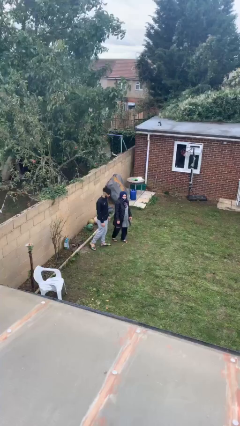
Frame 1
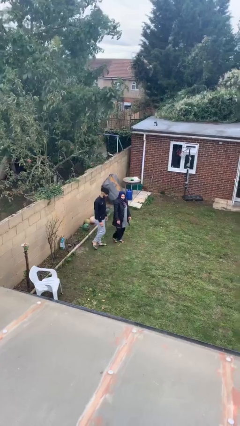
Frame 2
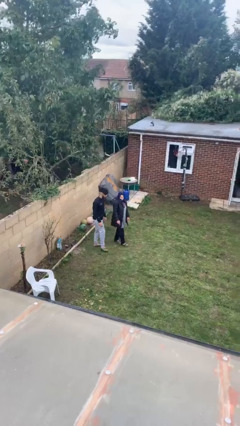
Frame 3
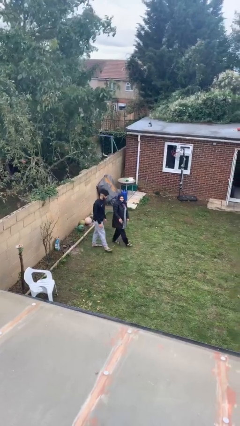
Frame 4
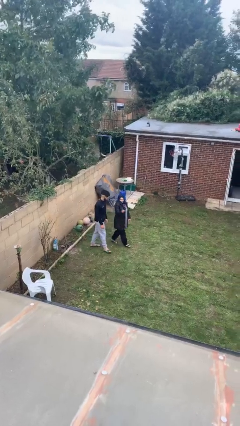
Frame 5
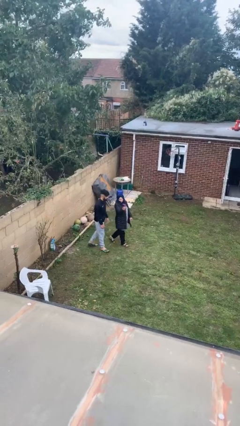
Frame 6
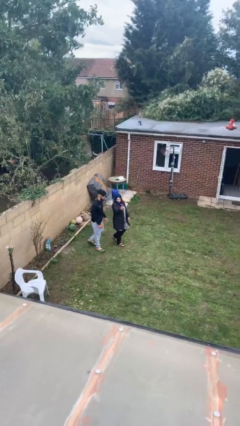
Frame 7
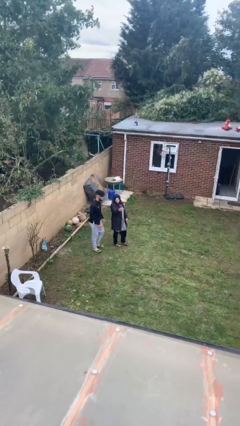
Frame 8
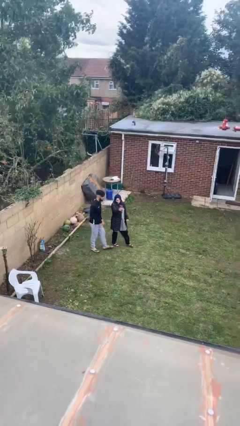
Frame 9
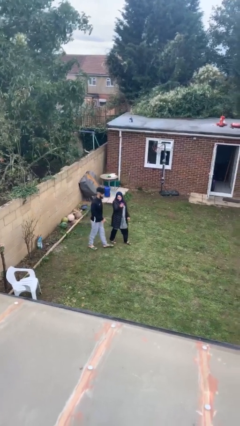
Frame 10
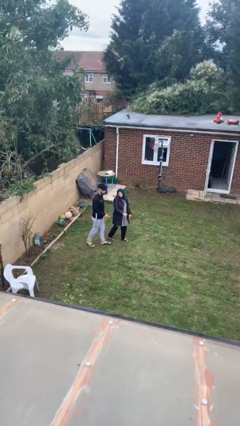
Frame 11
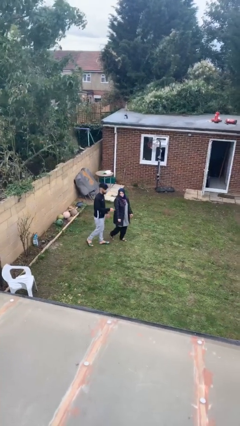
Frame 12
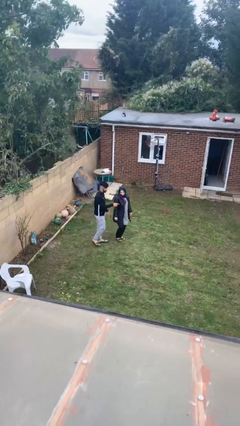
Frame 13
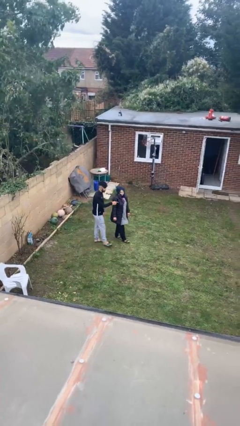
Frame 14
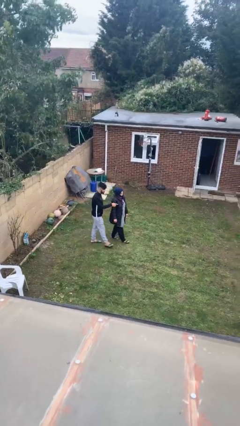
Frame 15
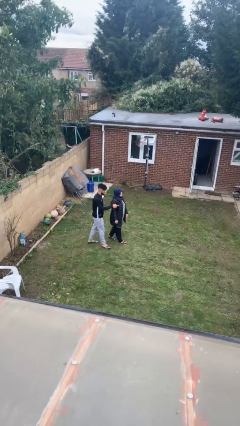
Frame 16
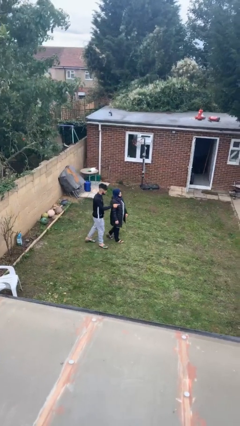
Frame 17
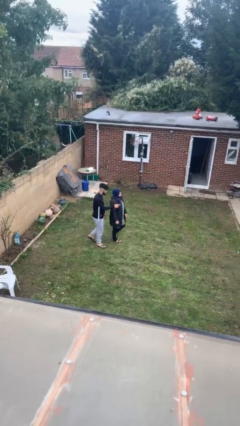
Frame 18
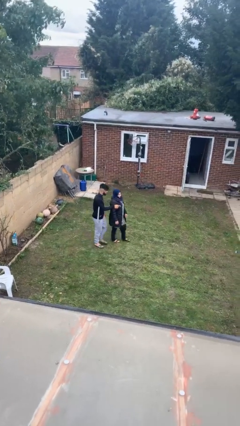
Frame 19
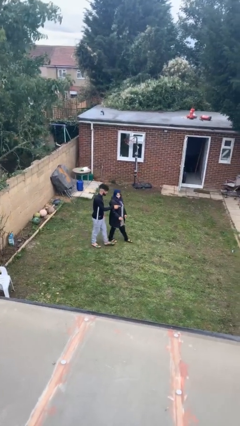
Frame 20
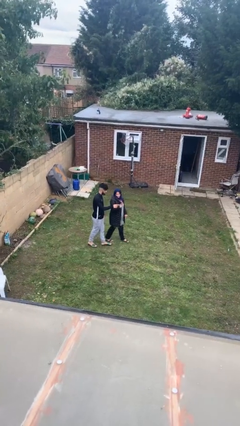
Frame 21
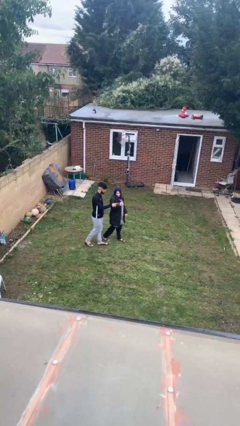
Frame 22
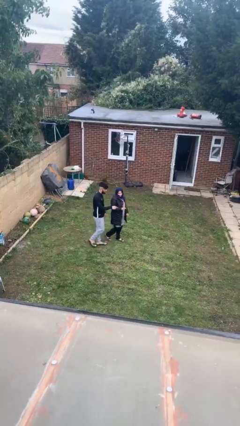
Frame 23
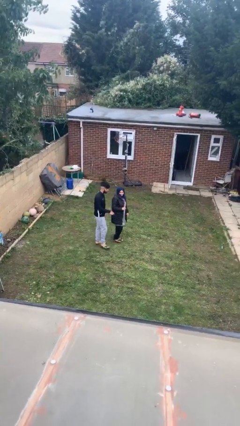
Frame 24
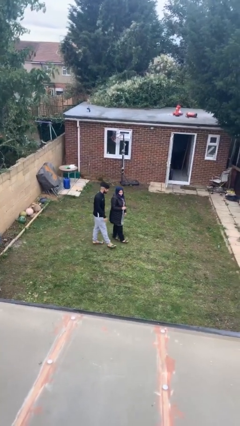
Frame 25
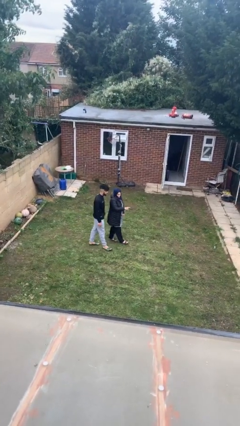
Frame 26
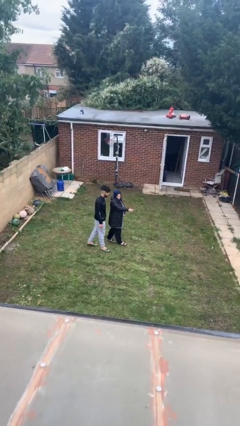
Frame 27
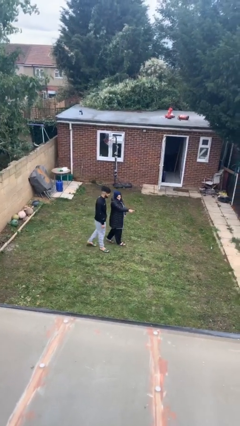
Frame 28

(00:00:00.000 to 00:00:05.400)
person talks to person

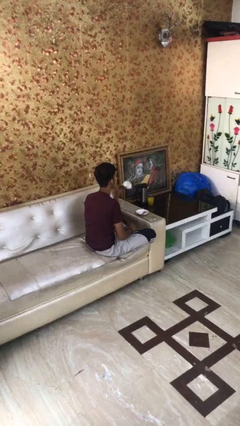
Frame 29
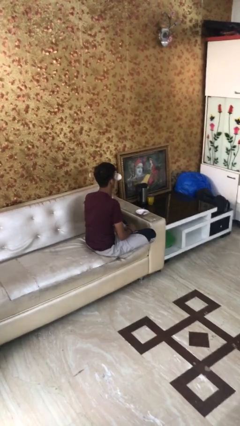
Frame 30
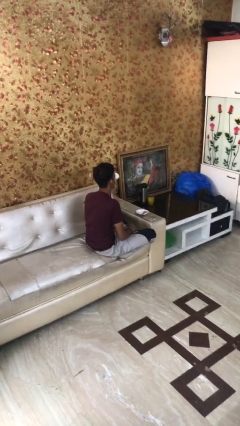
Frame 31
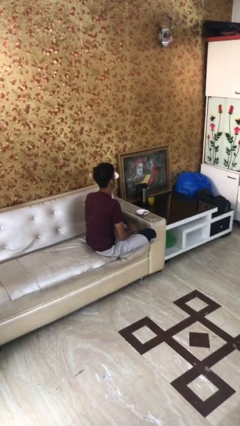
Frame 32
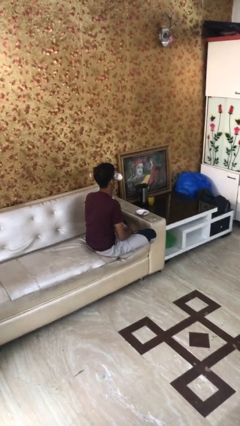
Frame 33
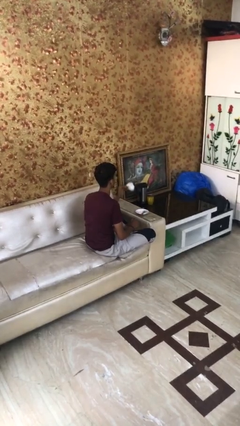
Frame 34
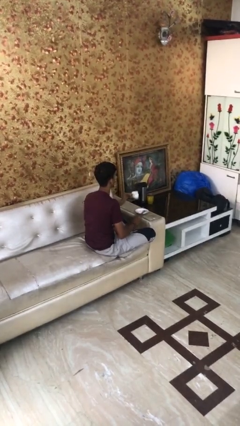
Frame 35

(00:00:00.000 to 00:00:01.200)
person drinks from mug

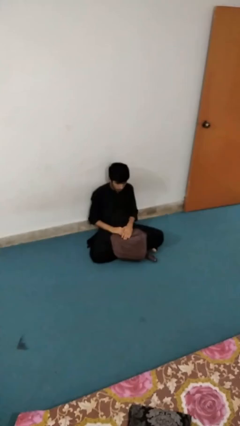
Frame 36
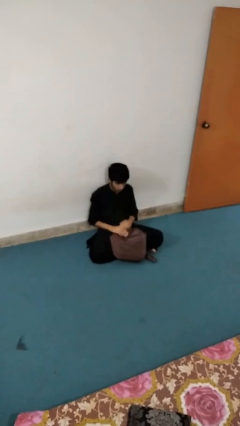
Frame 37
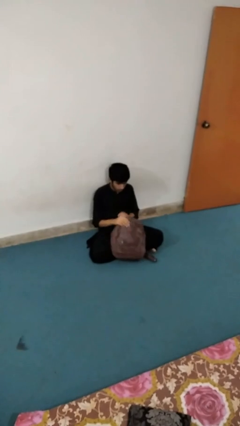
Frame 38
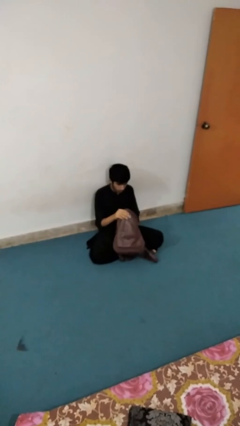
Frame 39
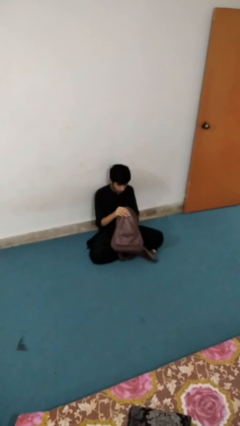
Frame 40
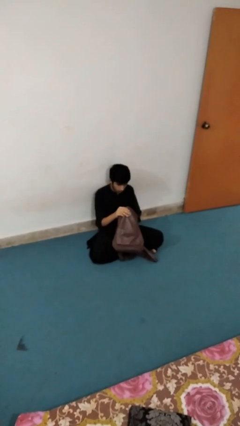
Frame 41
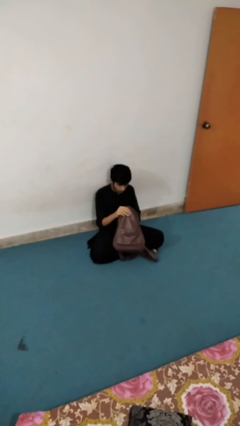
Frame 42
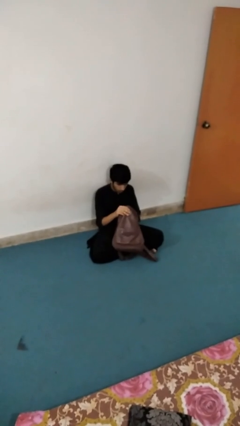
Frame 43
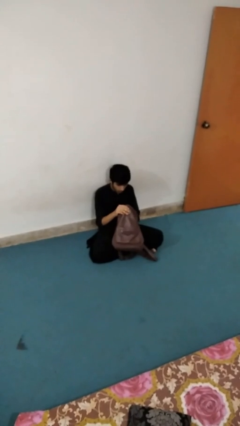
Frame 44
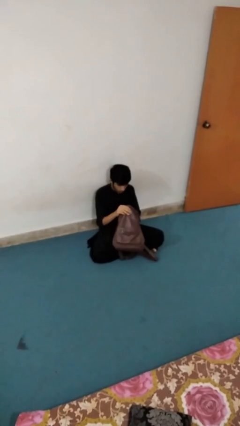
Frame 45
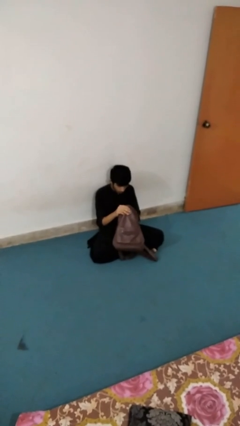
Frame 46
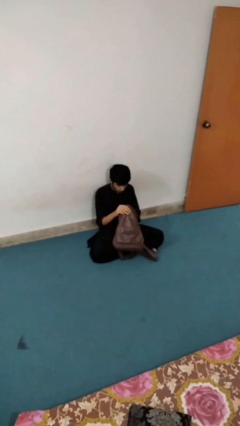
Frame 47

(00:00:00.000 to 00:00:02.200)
person searches in bag

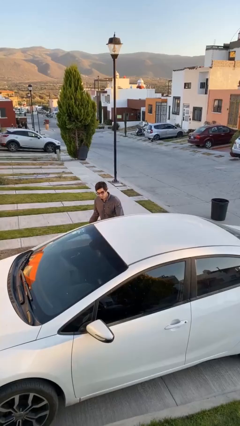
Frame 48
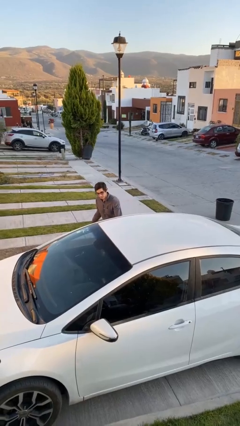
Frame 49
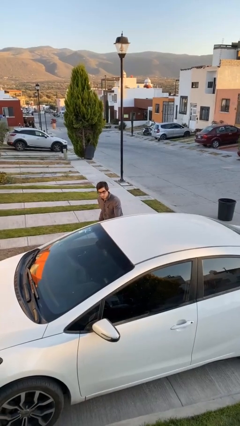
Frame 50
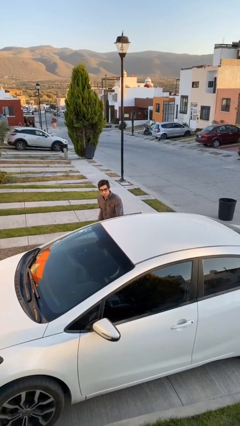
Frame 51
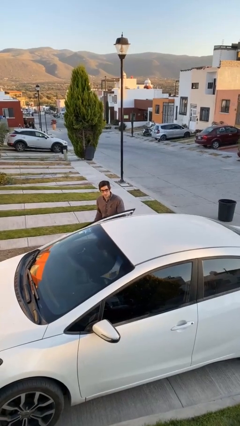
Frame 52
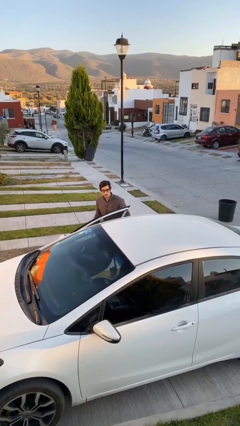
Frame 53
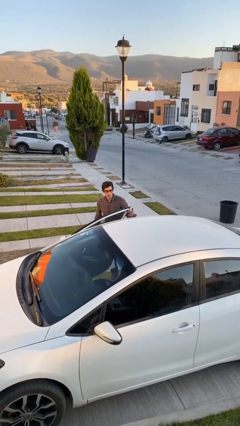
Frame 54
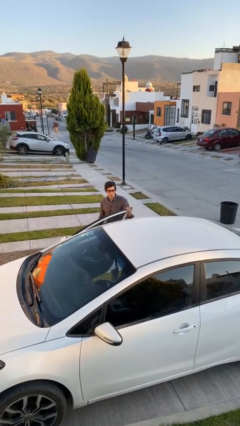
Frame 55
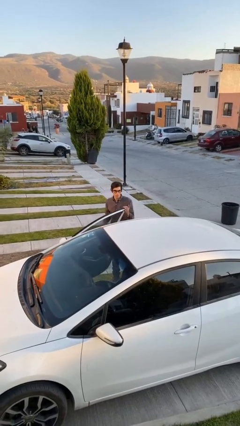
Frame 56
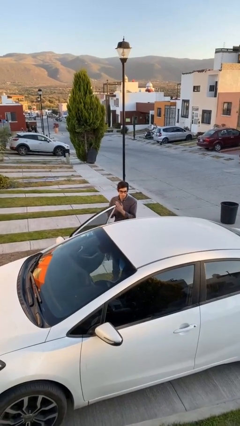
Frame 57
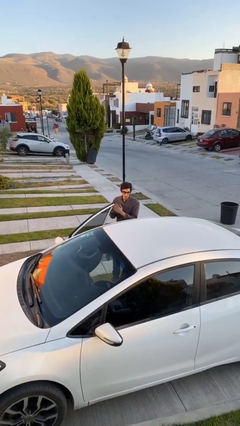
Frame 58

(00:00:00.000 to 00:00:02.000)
person opens car door

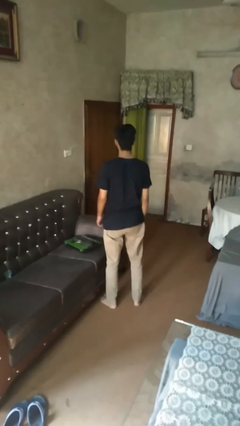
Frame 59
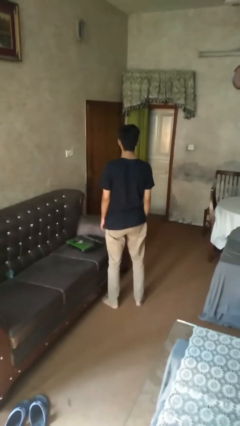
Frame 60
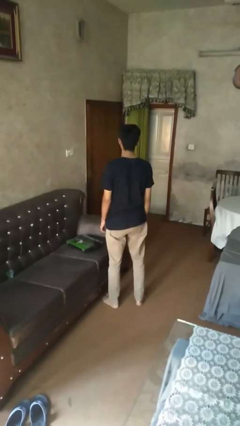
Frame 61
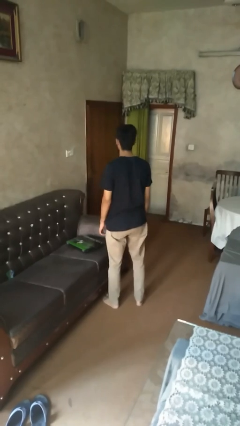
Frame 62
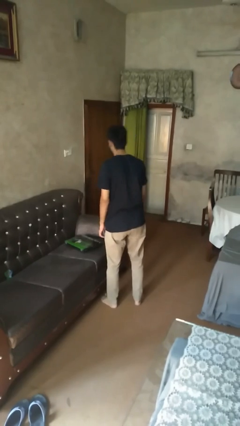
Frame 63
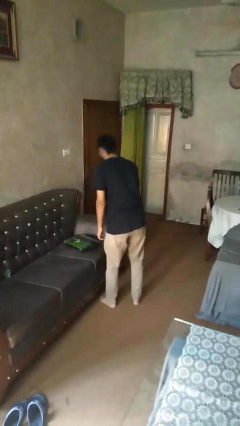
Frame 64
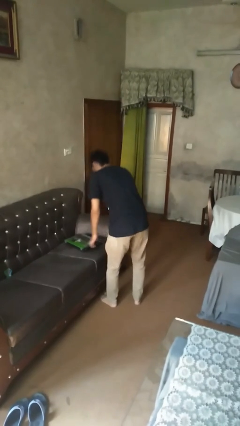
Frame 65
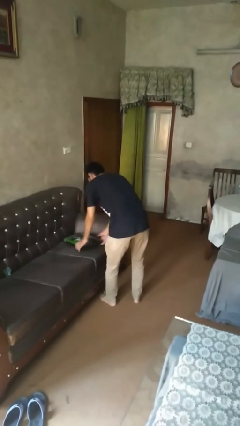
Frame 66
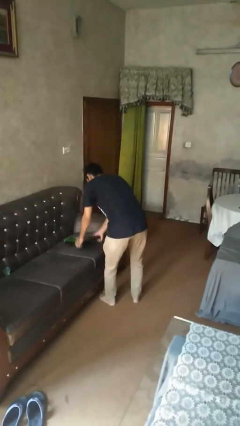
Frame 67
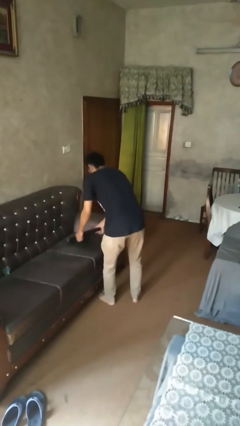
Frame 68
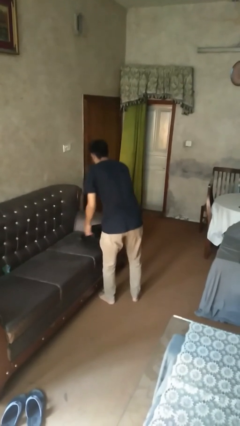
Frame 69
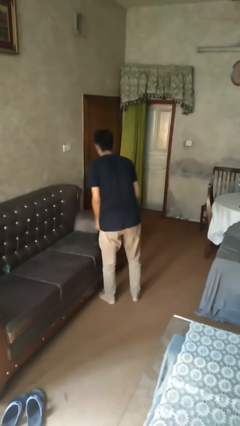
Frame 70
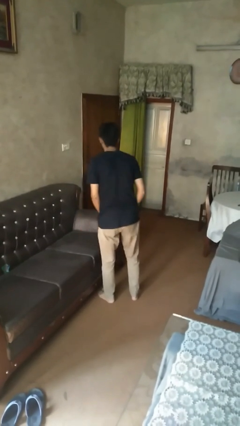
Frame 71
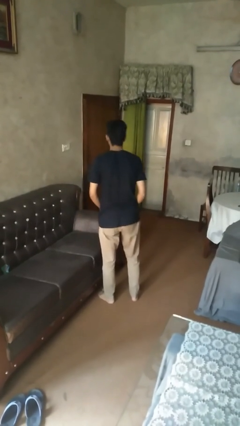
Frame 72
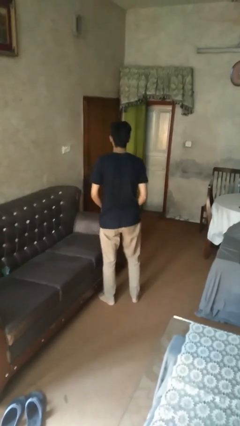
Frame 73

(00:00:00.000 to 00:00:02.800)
person picks up object from couch

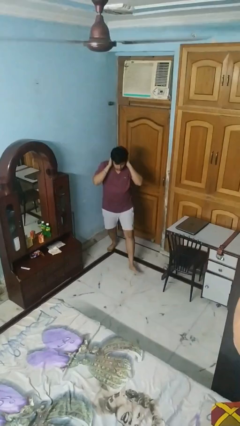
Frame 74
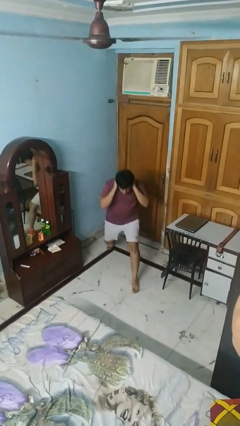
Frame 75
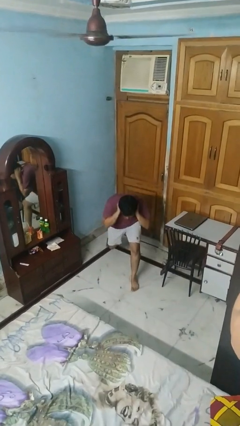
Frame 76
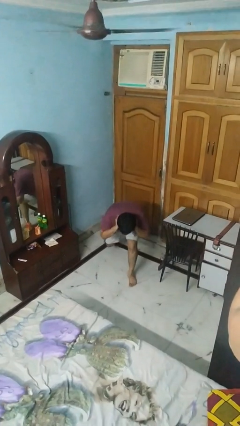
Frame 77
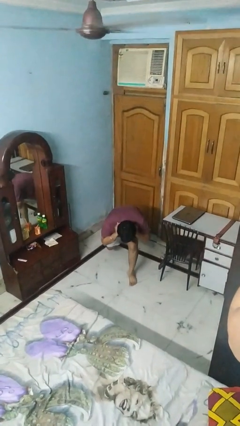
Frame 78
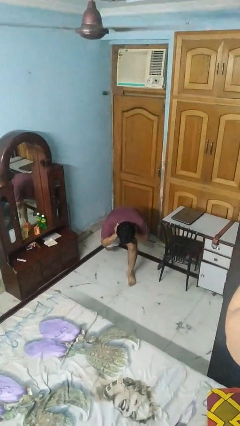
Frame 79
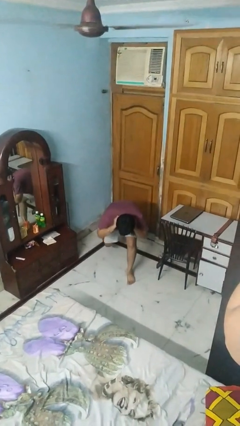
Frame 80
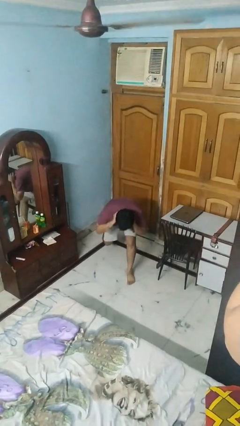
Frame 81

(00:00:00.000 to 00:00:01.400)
person exercises with lunges

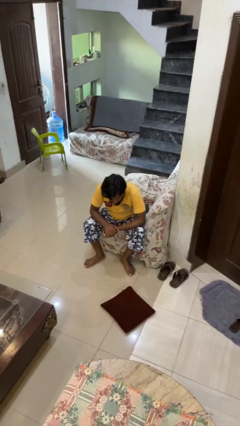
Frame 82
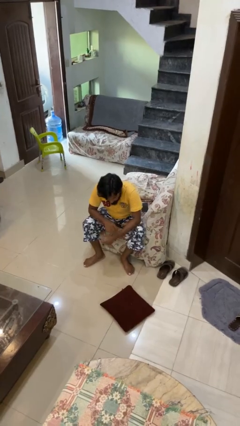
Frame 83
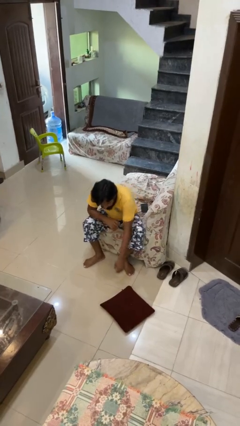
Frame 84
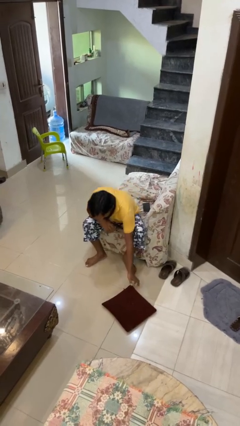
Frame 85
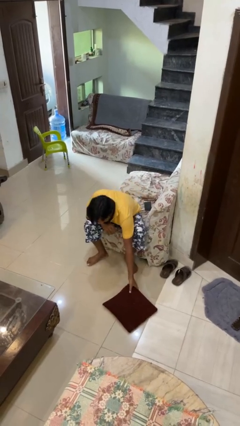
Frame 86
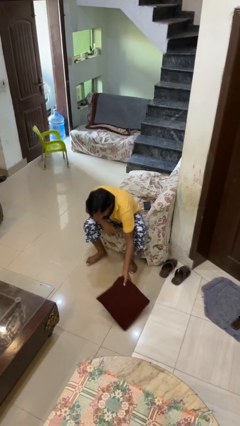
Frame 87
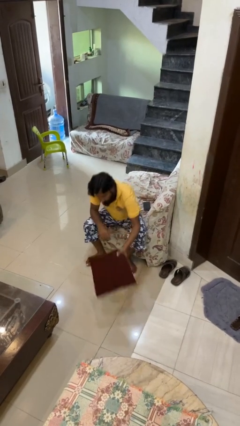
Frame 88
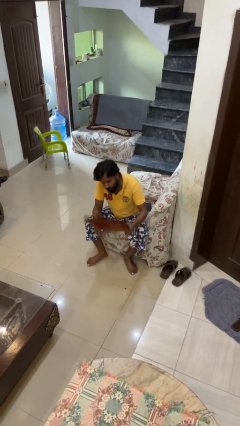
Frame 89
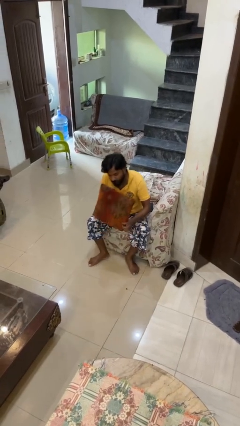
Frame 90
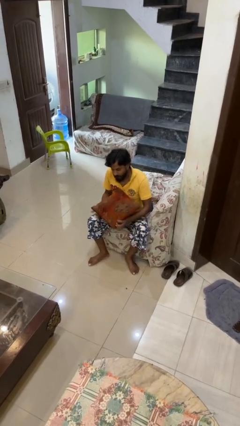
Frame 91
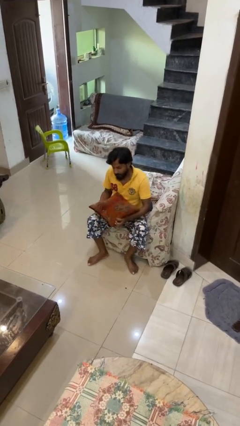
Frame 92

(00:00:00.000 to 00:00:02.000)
person picks up object from floor
